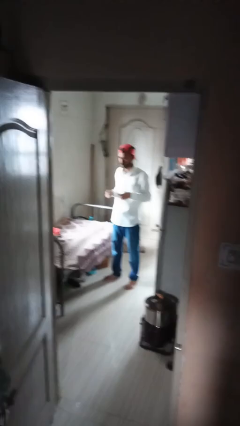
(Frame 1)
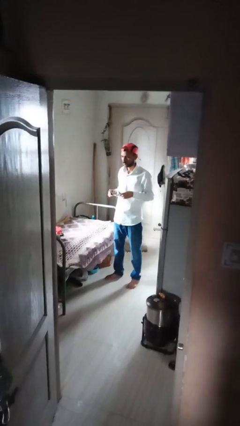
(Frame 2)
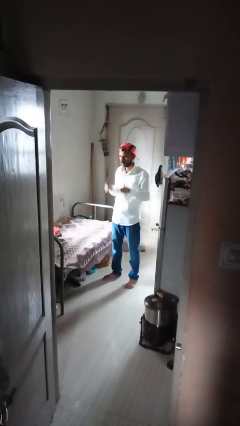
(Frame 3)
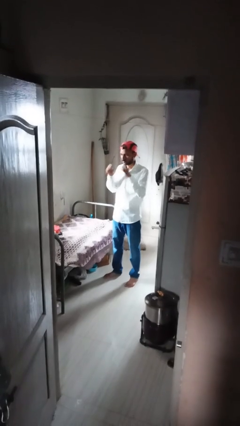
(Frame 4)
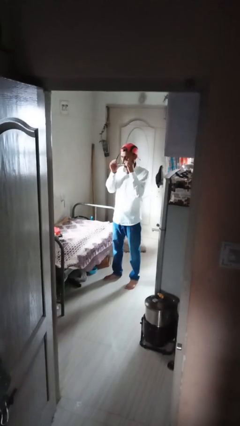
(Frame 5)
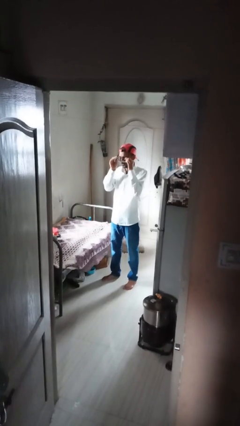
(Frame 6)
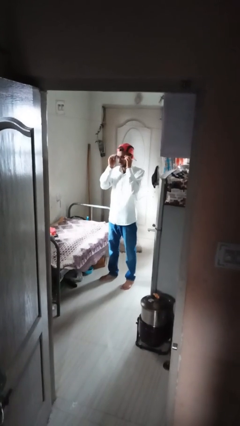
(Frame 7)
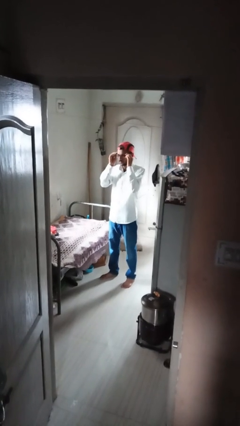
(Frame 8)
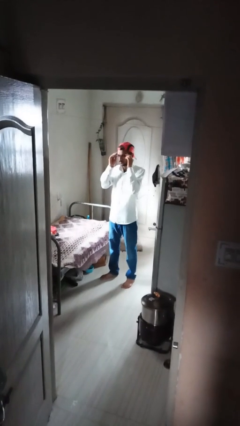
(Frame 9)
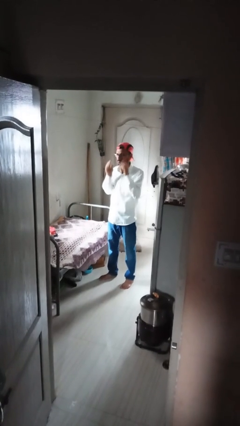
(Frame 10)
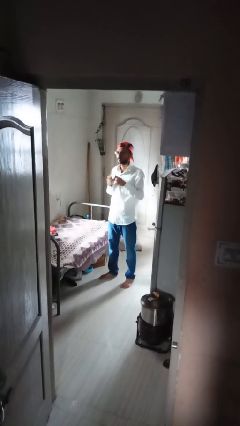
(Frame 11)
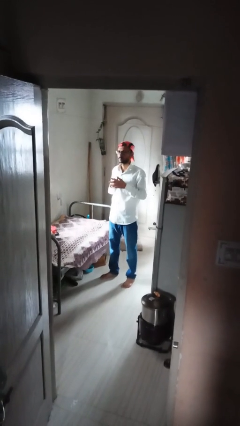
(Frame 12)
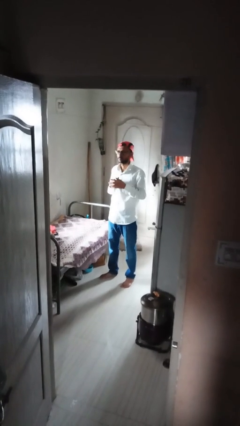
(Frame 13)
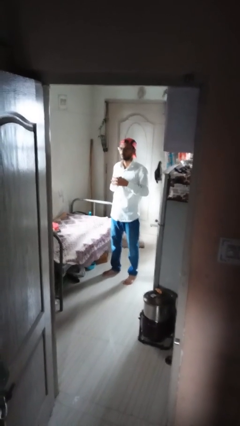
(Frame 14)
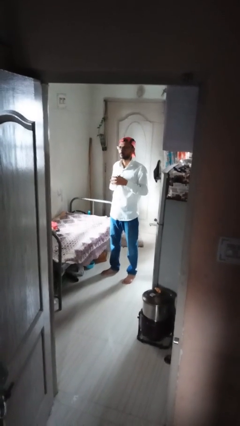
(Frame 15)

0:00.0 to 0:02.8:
person puts on glasses

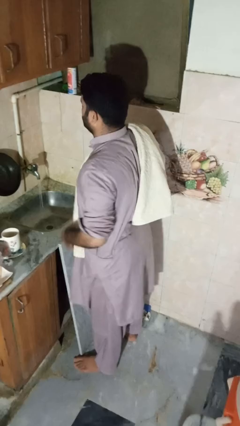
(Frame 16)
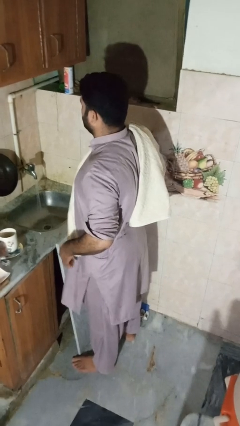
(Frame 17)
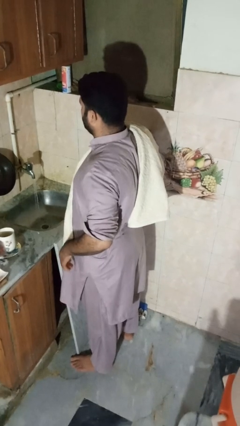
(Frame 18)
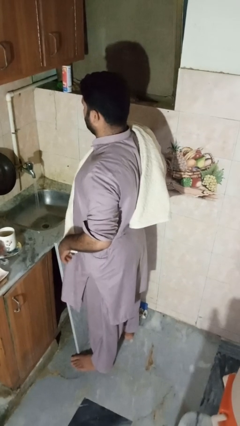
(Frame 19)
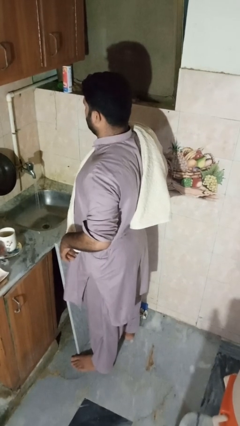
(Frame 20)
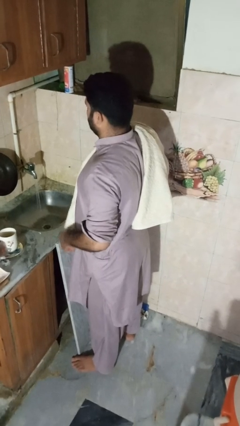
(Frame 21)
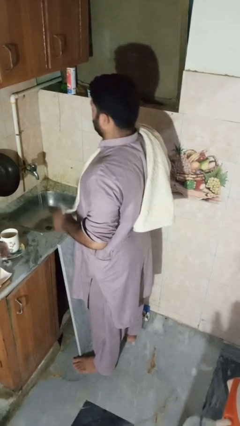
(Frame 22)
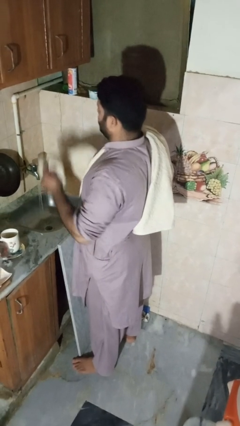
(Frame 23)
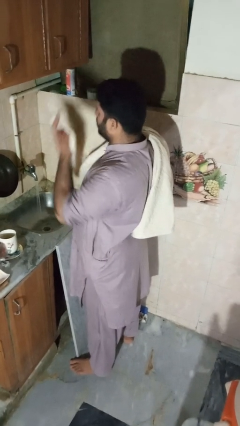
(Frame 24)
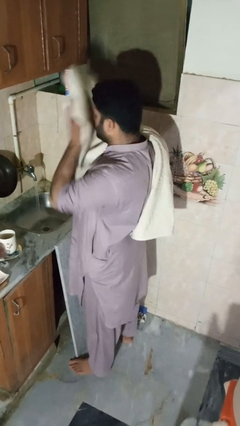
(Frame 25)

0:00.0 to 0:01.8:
person dries face with towel

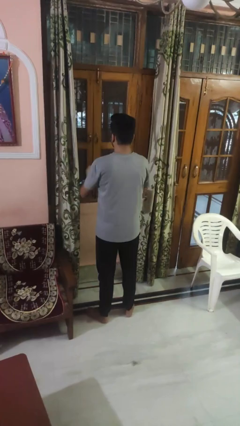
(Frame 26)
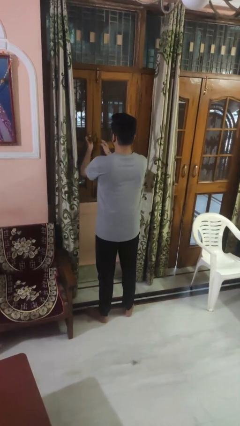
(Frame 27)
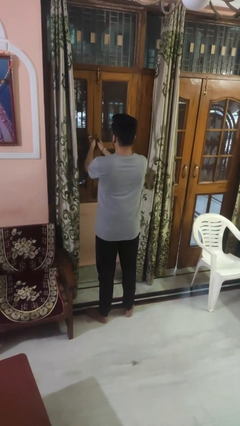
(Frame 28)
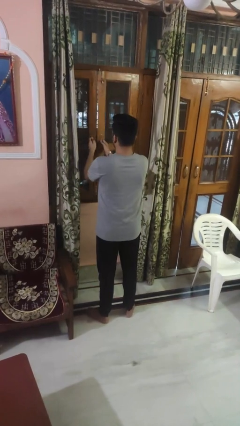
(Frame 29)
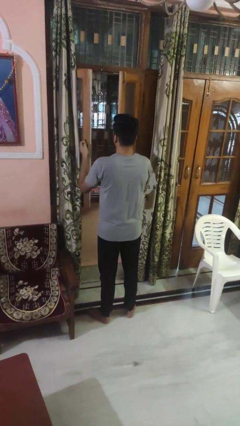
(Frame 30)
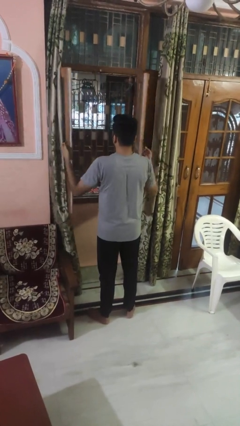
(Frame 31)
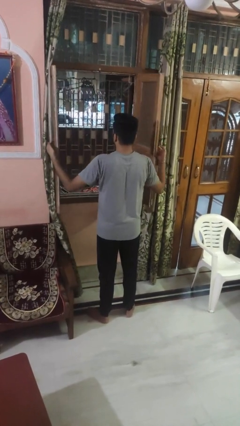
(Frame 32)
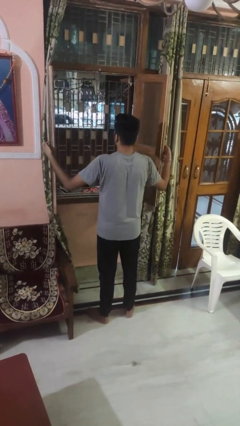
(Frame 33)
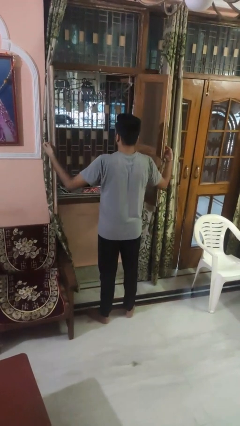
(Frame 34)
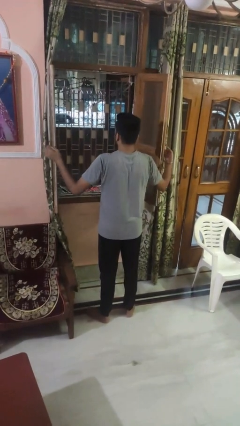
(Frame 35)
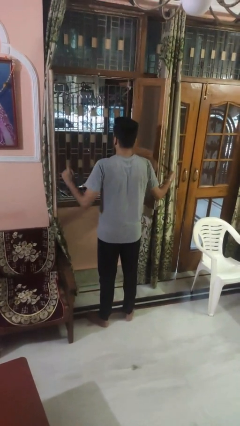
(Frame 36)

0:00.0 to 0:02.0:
person opens home window

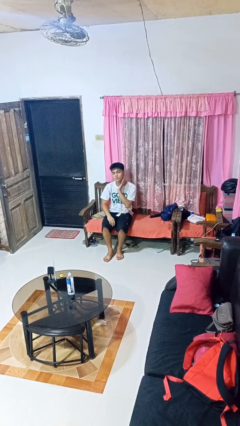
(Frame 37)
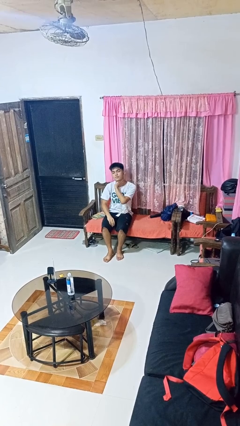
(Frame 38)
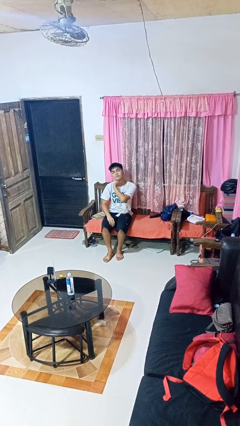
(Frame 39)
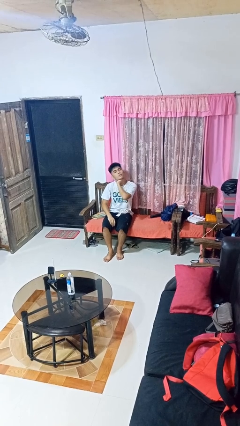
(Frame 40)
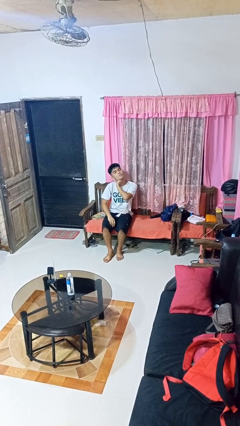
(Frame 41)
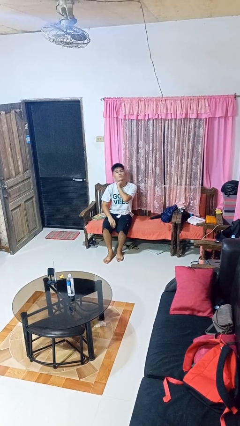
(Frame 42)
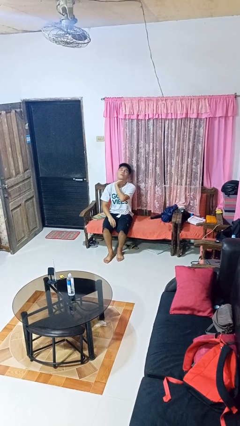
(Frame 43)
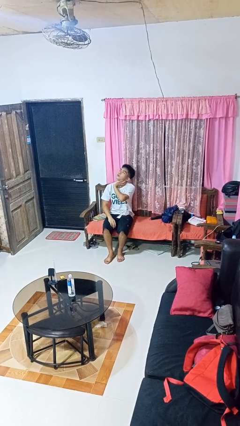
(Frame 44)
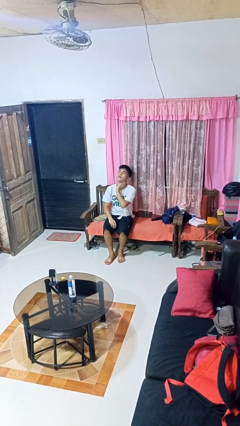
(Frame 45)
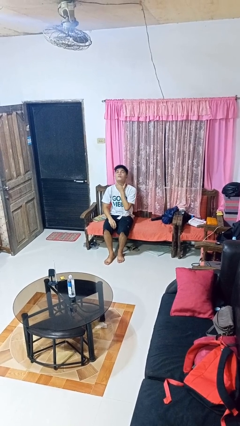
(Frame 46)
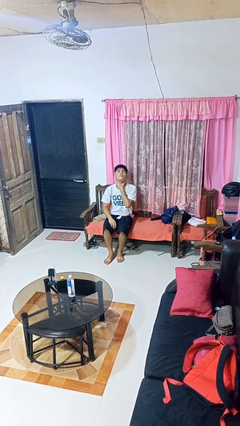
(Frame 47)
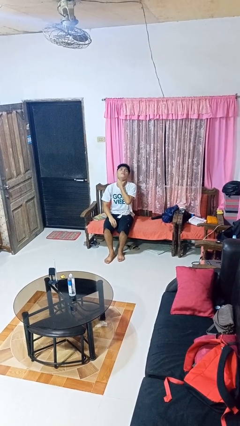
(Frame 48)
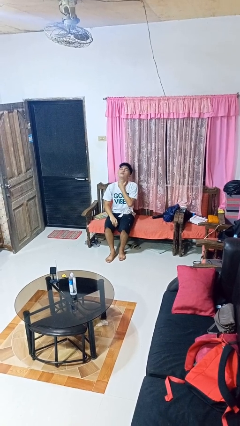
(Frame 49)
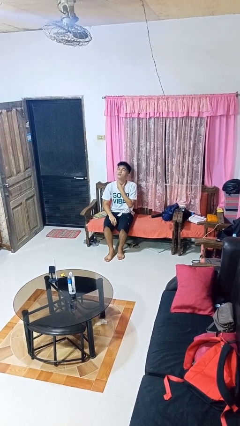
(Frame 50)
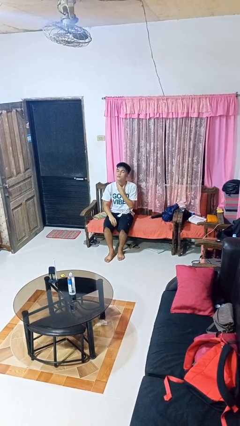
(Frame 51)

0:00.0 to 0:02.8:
person rubs neck

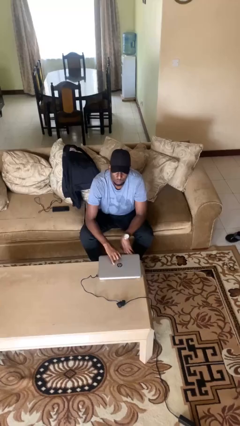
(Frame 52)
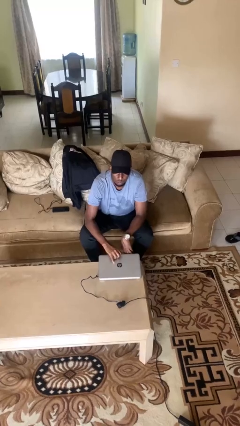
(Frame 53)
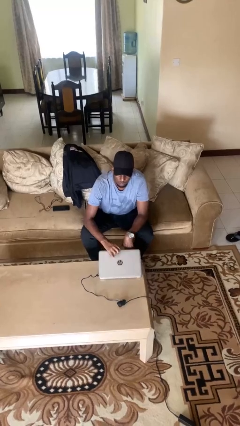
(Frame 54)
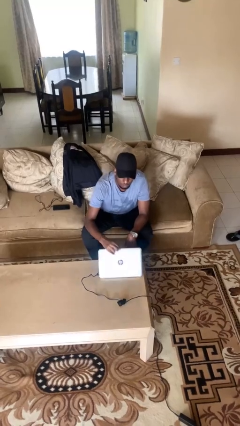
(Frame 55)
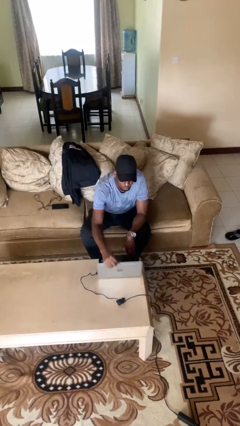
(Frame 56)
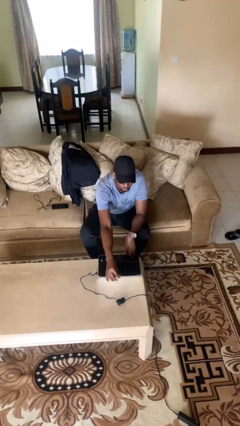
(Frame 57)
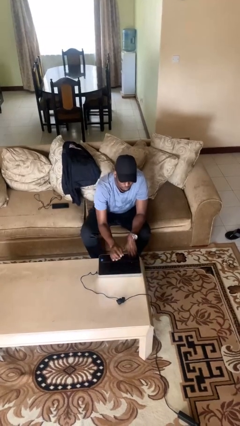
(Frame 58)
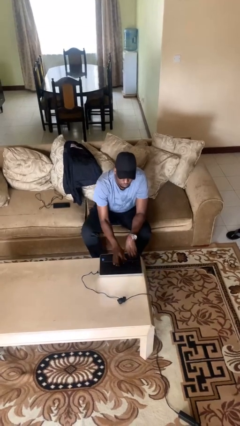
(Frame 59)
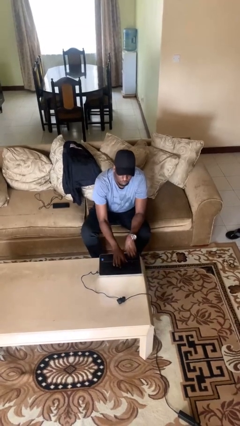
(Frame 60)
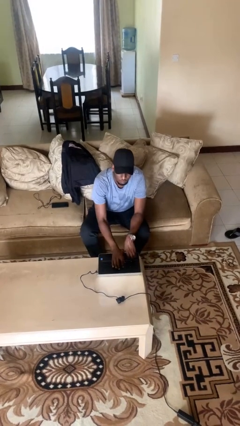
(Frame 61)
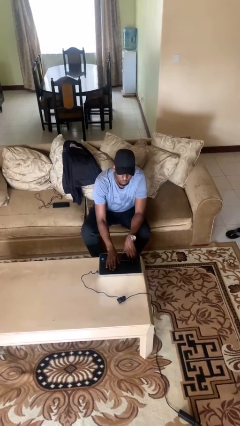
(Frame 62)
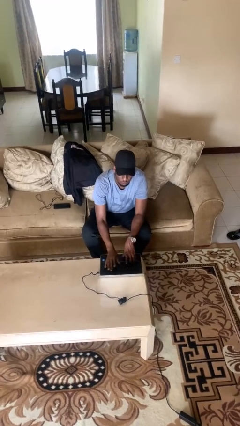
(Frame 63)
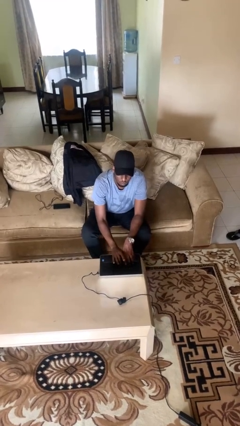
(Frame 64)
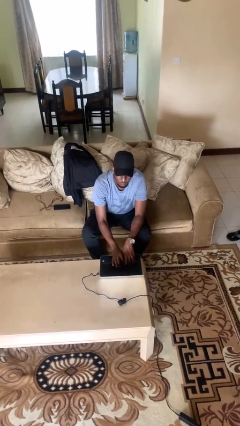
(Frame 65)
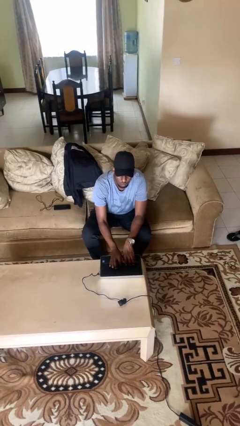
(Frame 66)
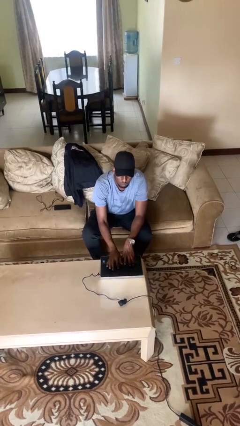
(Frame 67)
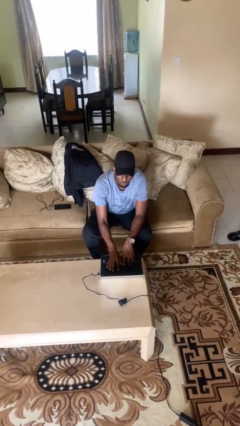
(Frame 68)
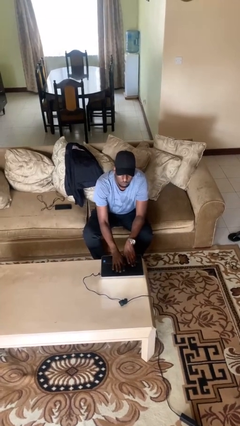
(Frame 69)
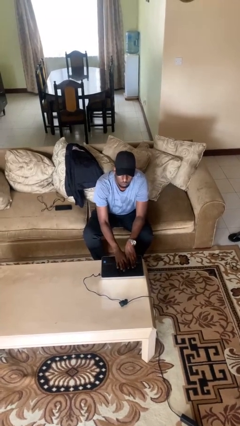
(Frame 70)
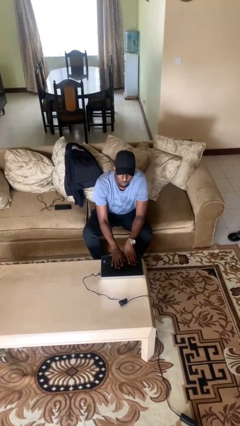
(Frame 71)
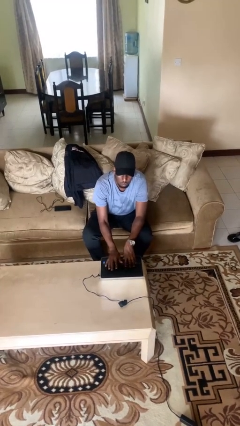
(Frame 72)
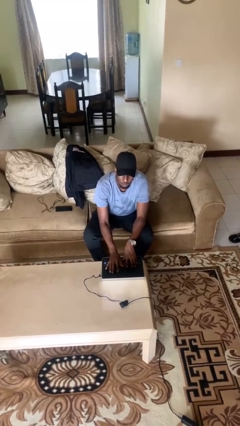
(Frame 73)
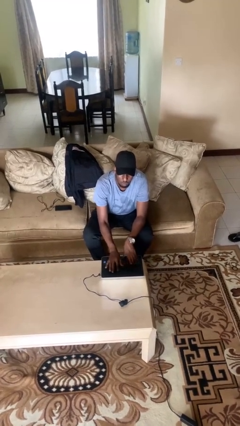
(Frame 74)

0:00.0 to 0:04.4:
person interacts with laptop

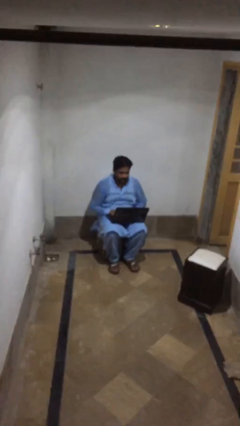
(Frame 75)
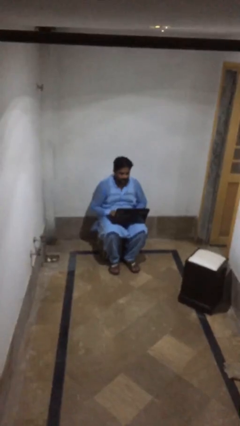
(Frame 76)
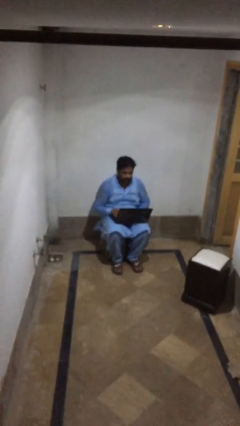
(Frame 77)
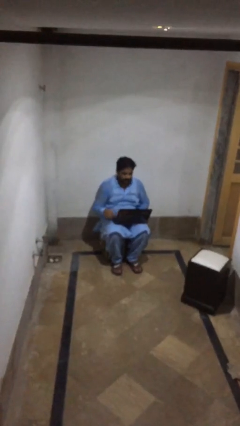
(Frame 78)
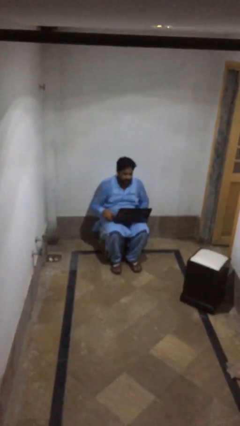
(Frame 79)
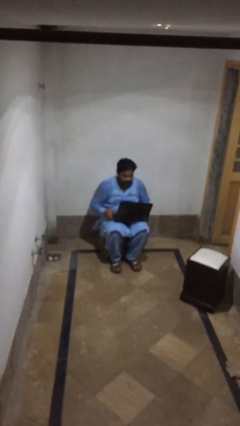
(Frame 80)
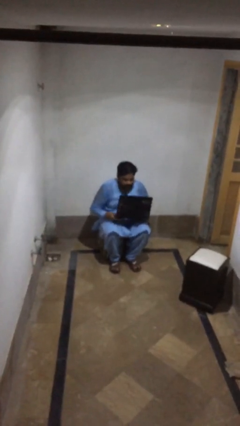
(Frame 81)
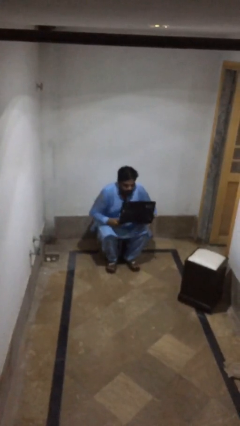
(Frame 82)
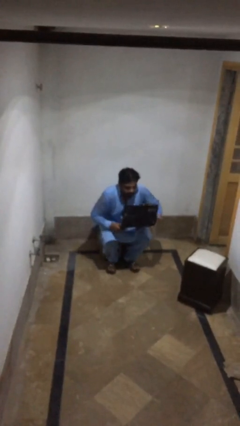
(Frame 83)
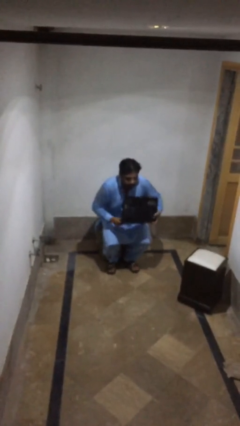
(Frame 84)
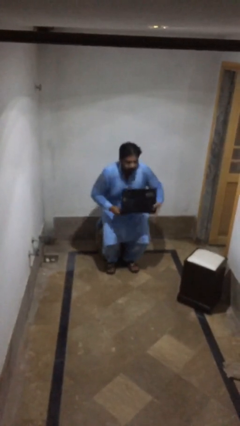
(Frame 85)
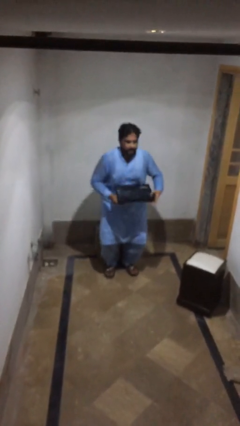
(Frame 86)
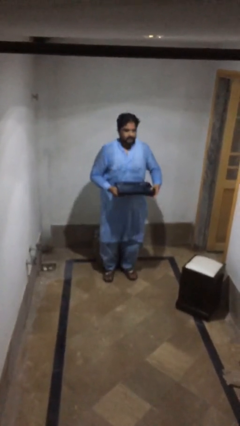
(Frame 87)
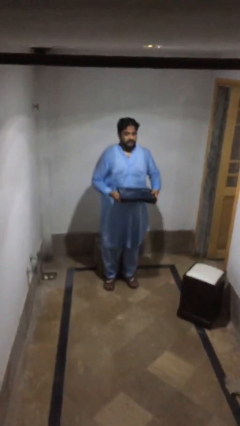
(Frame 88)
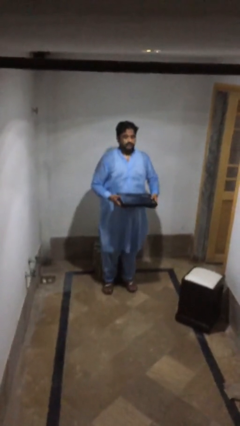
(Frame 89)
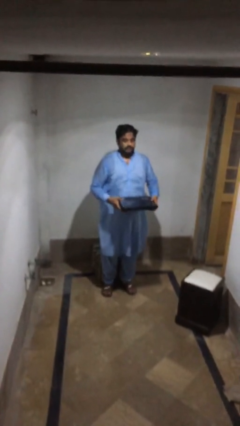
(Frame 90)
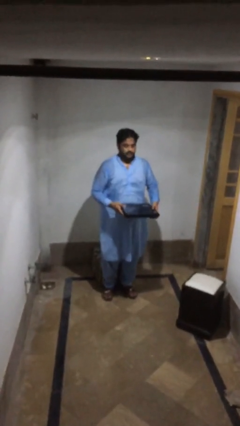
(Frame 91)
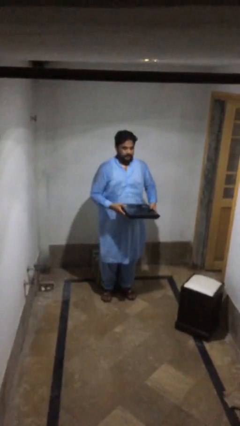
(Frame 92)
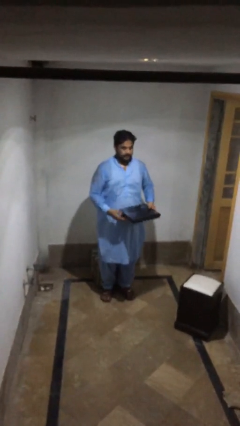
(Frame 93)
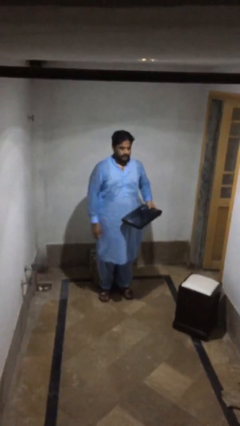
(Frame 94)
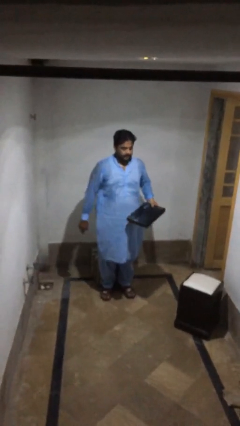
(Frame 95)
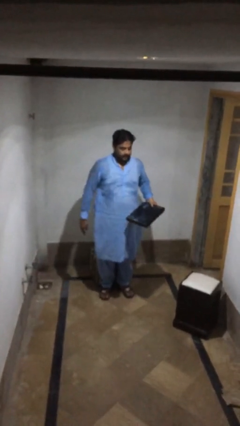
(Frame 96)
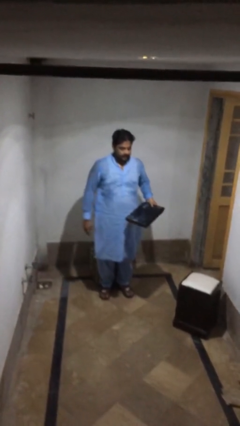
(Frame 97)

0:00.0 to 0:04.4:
person stands up
